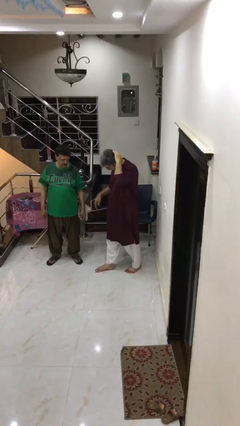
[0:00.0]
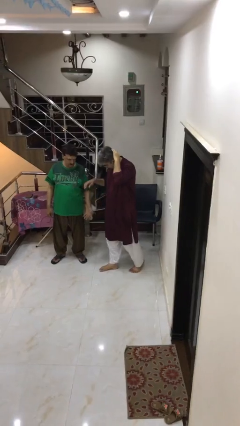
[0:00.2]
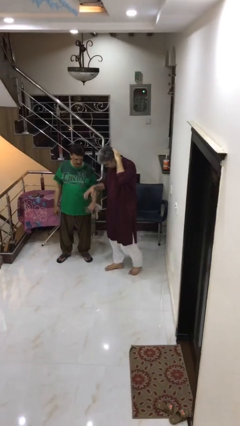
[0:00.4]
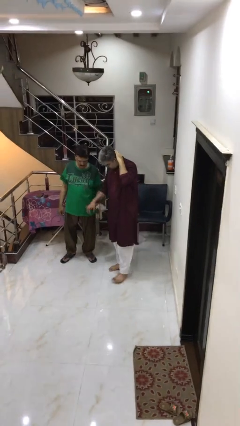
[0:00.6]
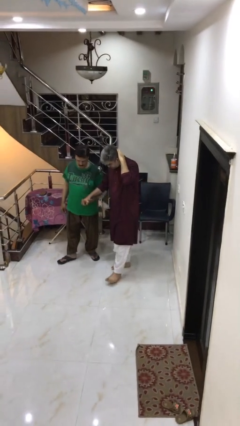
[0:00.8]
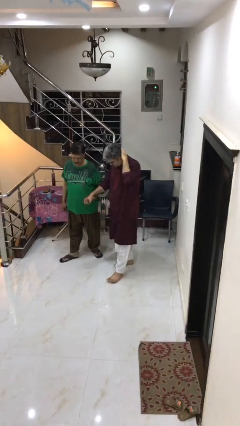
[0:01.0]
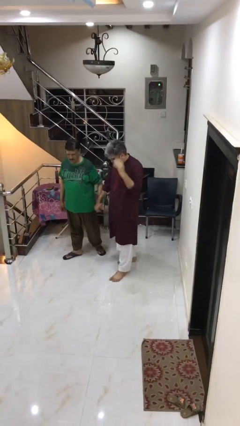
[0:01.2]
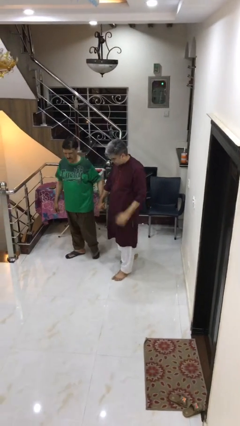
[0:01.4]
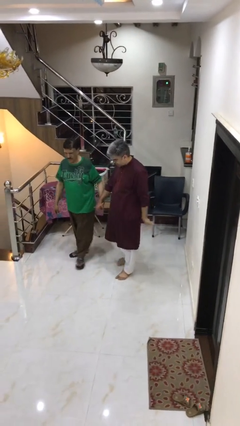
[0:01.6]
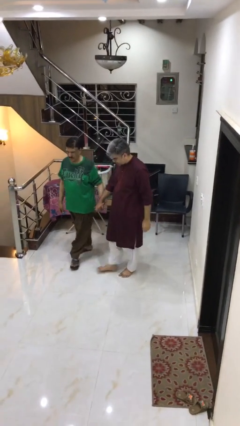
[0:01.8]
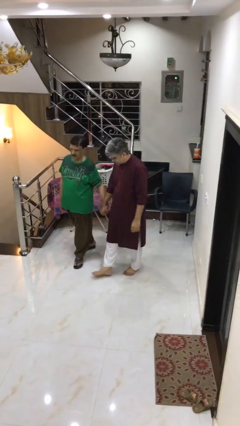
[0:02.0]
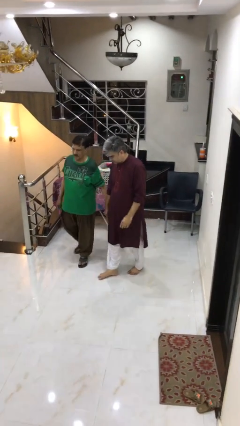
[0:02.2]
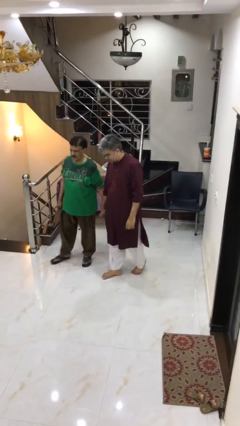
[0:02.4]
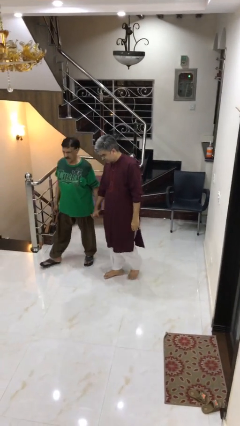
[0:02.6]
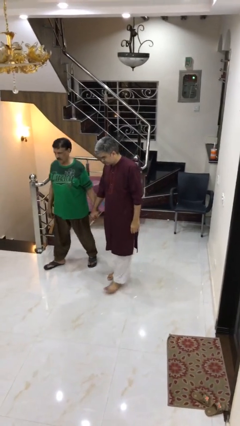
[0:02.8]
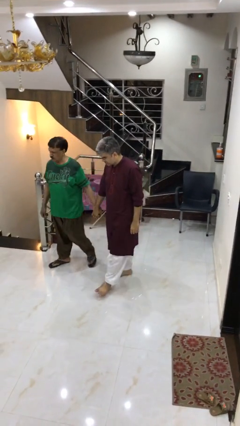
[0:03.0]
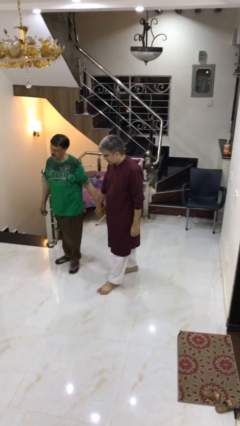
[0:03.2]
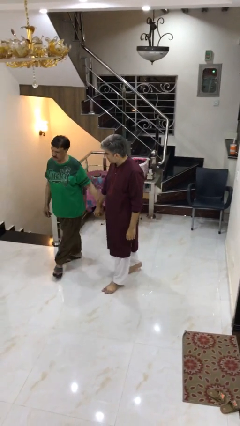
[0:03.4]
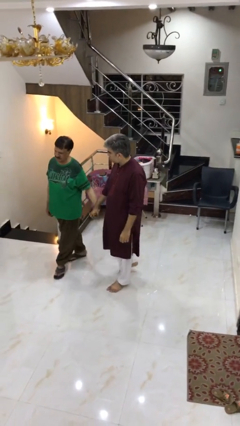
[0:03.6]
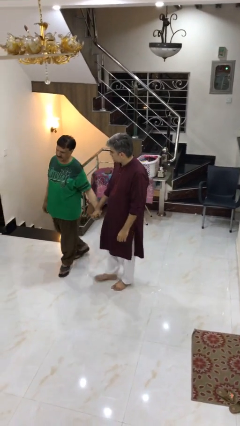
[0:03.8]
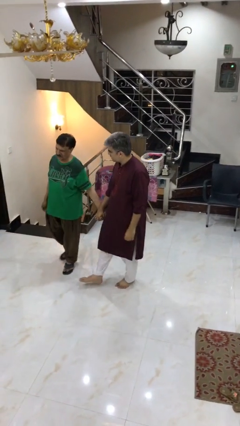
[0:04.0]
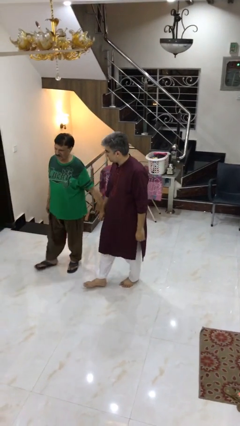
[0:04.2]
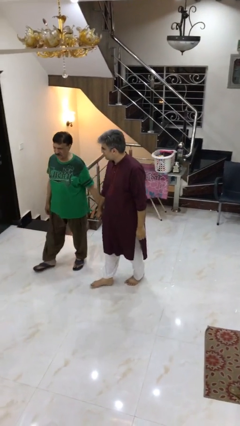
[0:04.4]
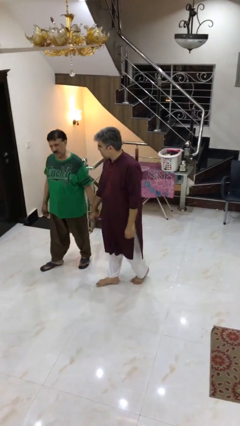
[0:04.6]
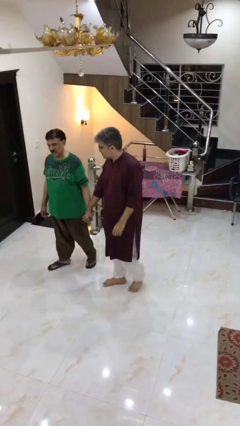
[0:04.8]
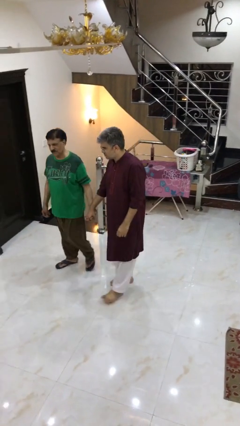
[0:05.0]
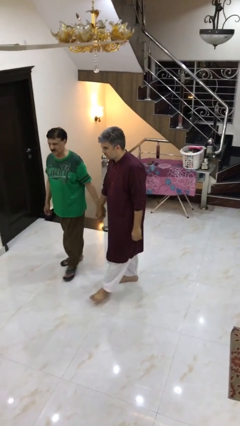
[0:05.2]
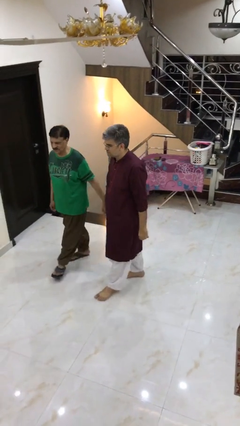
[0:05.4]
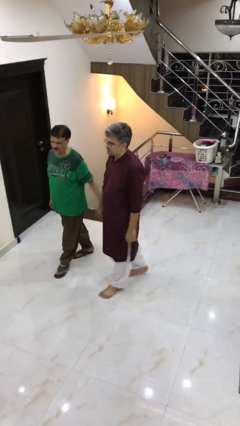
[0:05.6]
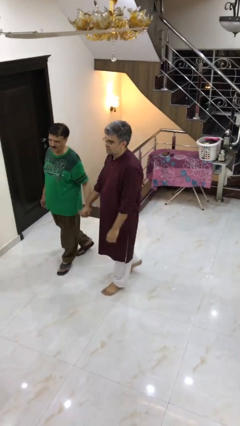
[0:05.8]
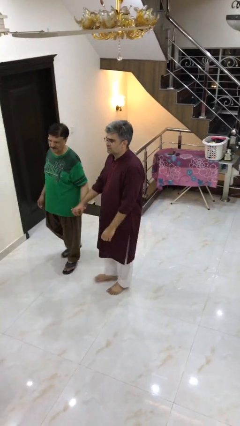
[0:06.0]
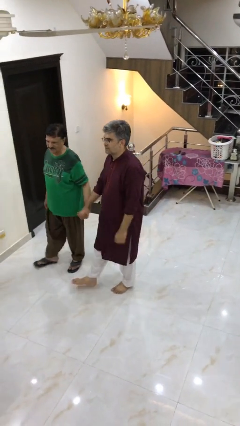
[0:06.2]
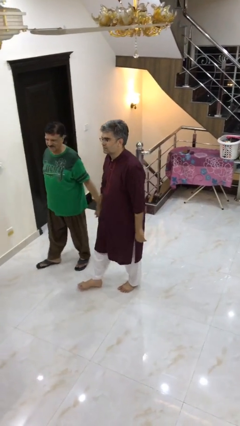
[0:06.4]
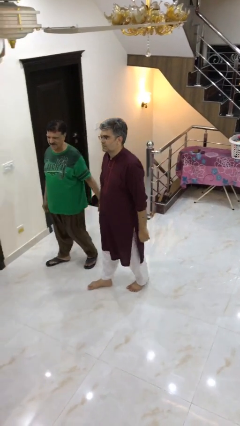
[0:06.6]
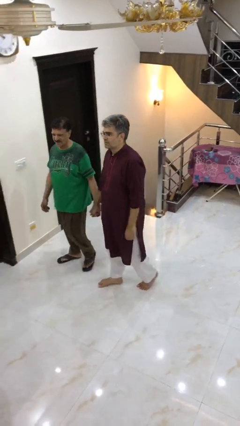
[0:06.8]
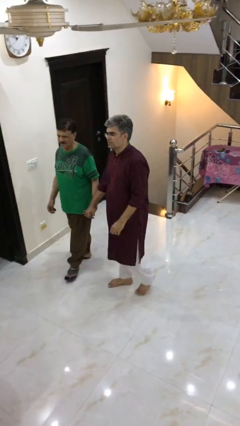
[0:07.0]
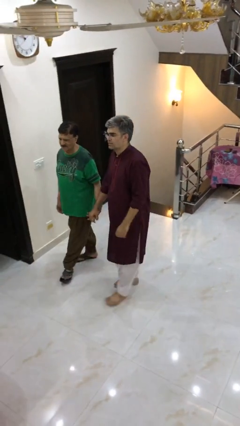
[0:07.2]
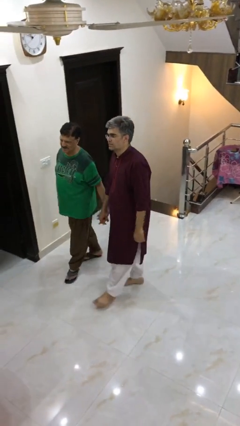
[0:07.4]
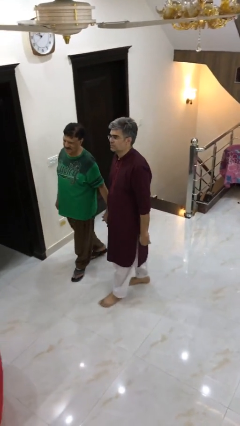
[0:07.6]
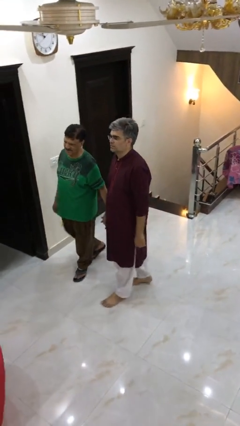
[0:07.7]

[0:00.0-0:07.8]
person holds hand

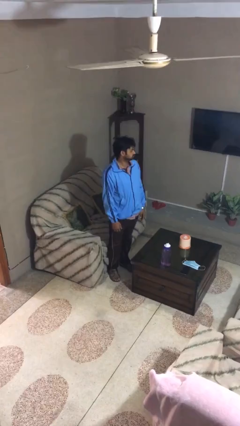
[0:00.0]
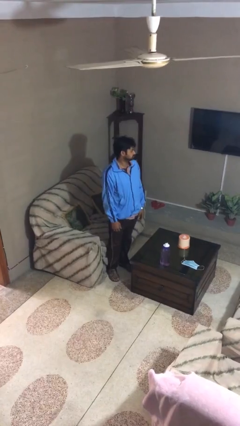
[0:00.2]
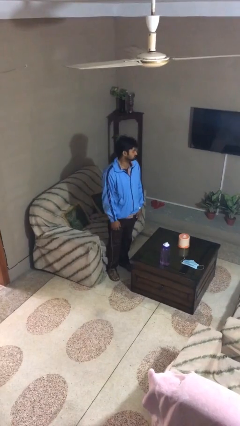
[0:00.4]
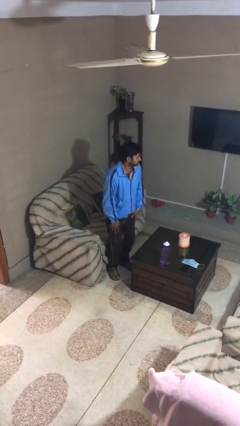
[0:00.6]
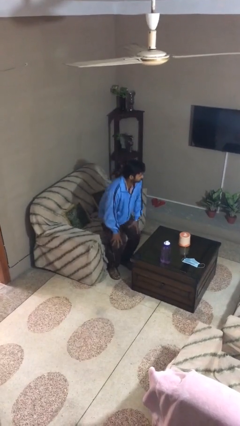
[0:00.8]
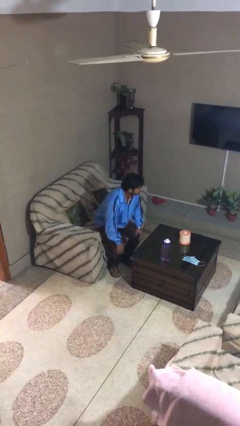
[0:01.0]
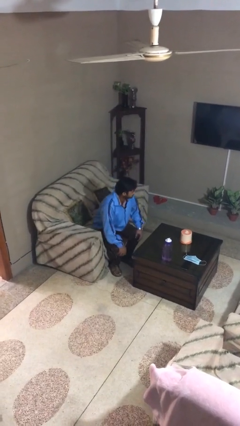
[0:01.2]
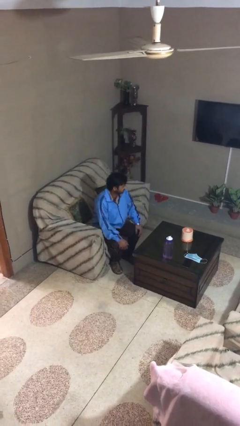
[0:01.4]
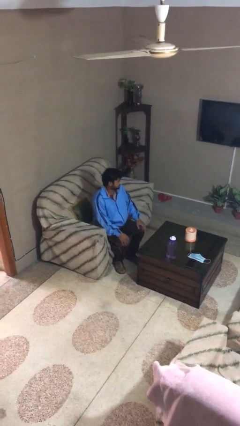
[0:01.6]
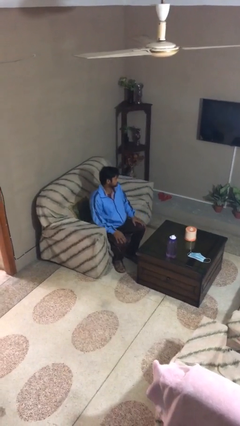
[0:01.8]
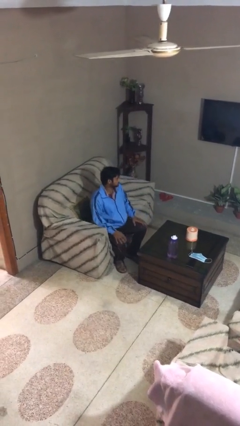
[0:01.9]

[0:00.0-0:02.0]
person sits down

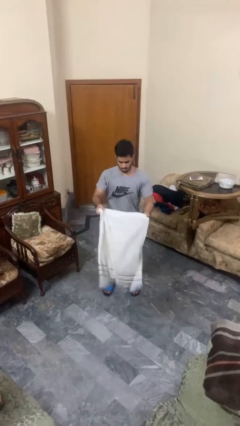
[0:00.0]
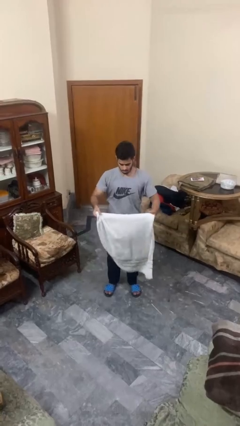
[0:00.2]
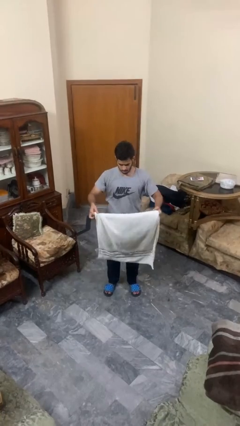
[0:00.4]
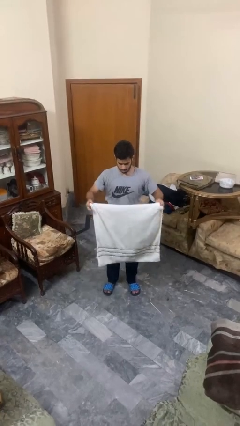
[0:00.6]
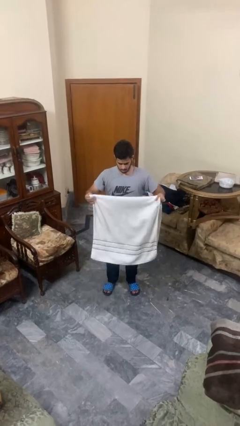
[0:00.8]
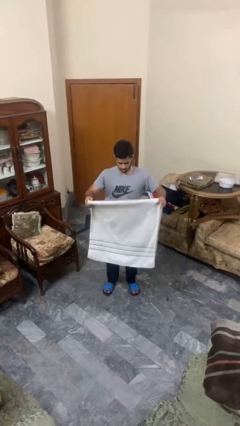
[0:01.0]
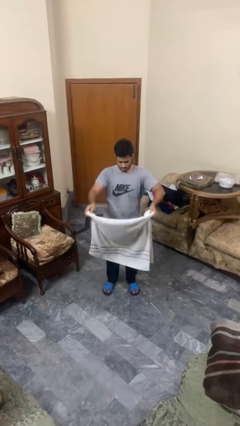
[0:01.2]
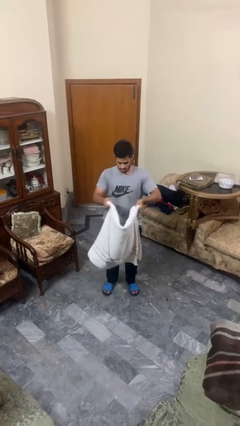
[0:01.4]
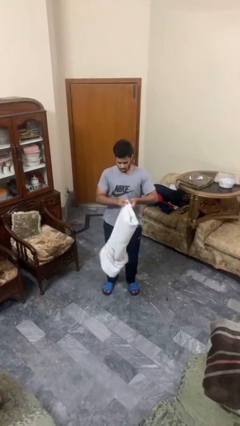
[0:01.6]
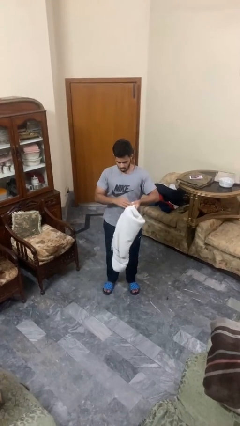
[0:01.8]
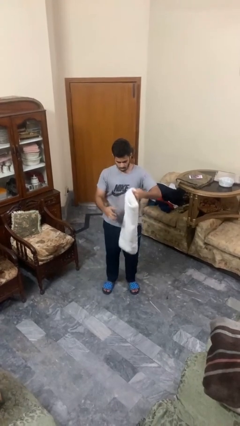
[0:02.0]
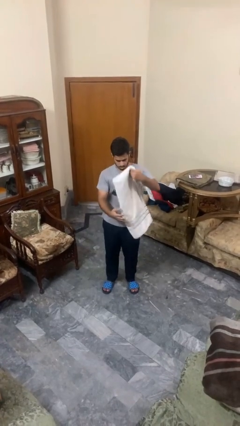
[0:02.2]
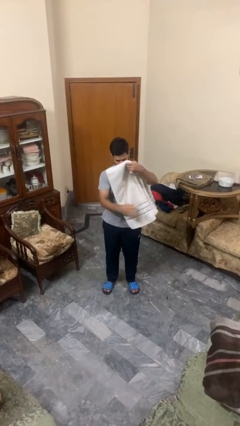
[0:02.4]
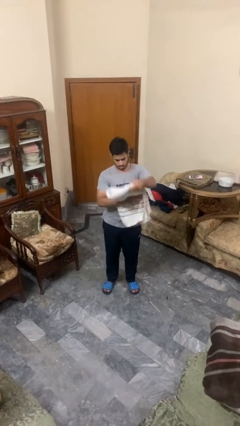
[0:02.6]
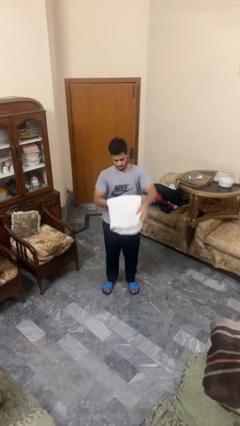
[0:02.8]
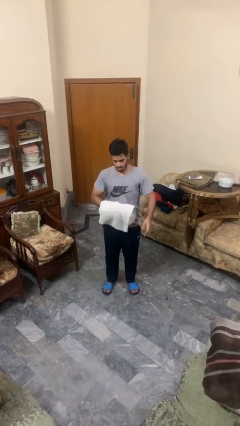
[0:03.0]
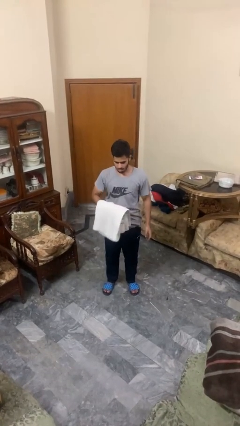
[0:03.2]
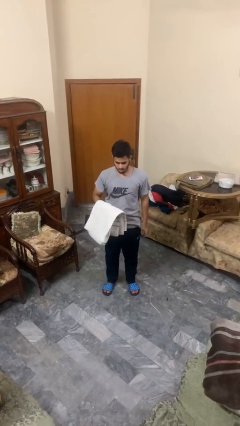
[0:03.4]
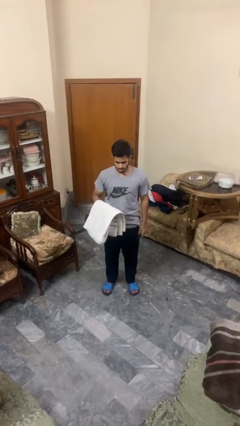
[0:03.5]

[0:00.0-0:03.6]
person folds towel

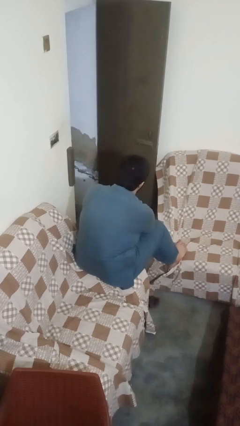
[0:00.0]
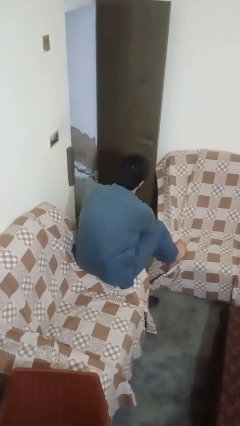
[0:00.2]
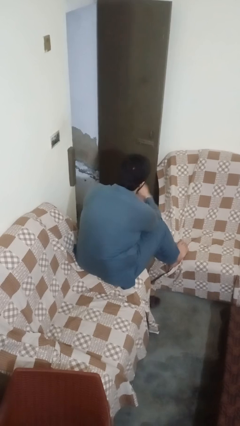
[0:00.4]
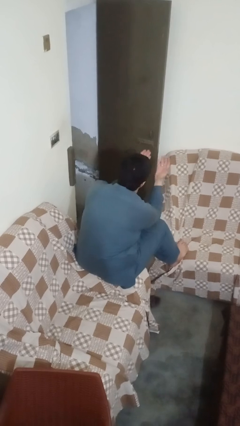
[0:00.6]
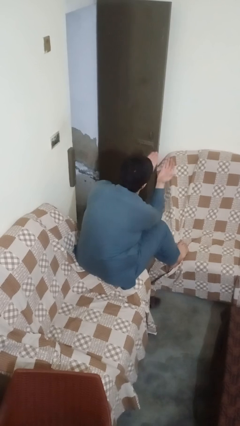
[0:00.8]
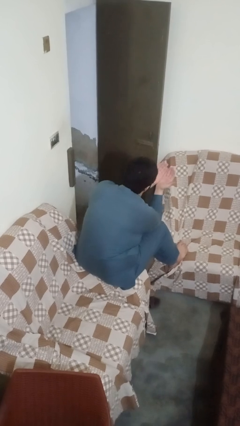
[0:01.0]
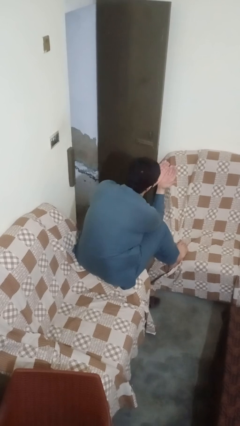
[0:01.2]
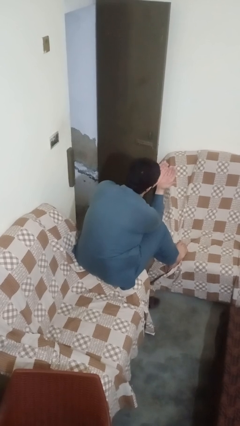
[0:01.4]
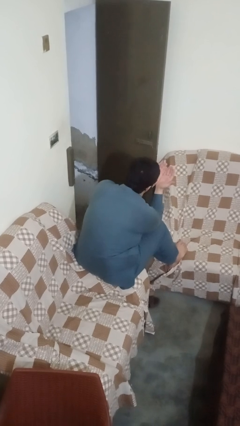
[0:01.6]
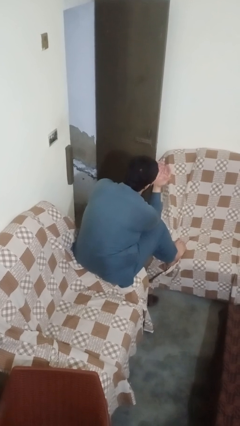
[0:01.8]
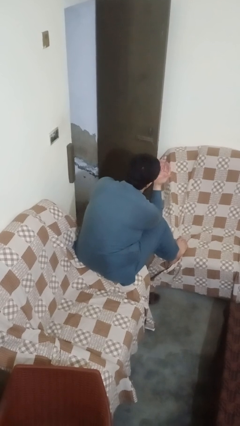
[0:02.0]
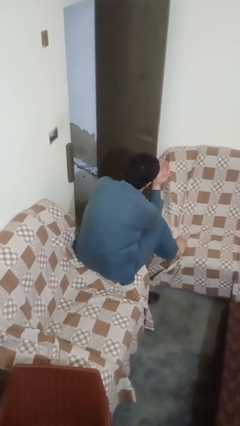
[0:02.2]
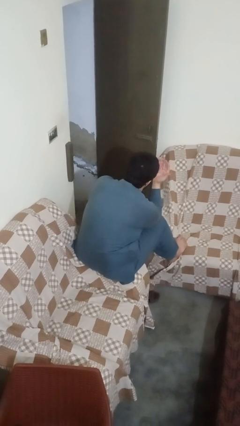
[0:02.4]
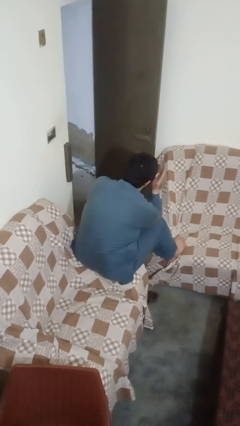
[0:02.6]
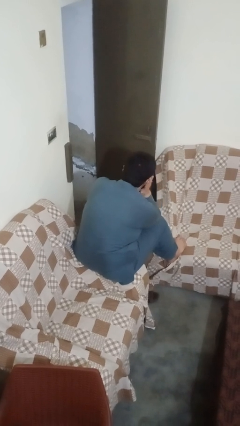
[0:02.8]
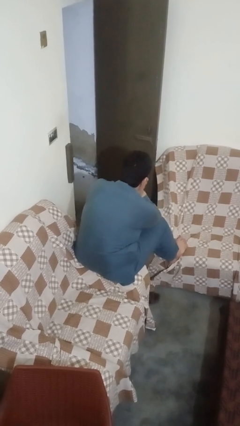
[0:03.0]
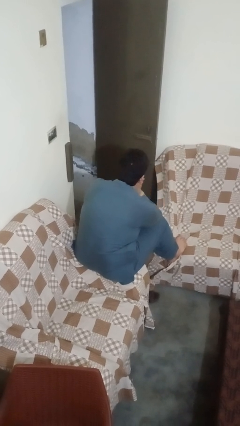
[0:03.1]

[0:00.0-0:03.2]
person prays

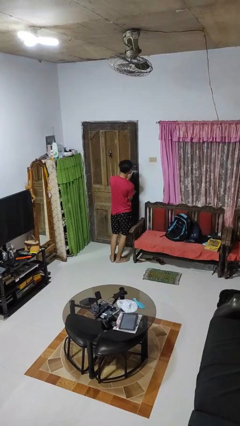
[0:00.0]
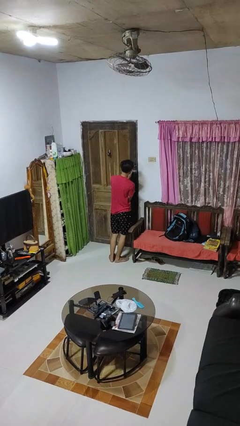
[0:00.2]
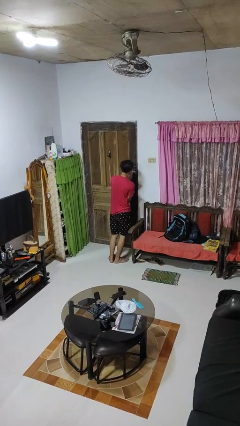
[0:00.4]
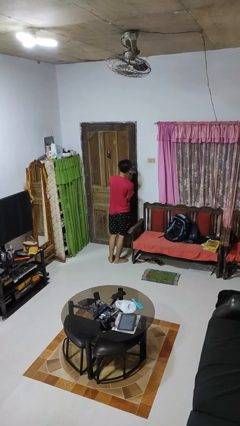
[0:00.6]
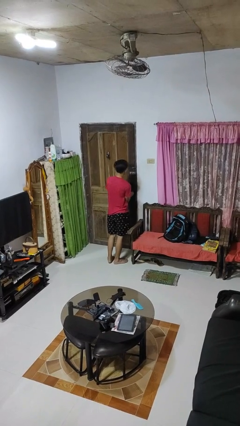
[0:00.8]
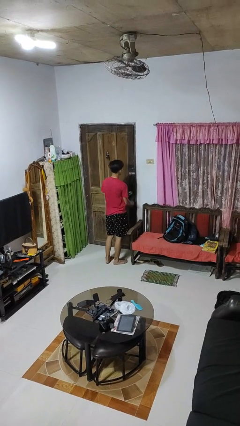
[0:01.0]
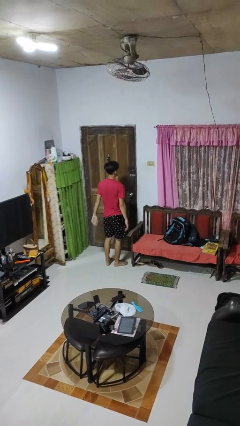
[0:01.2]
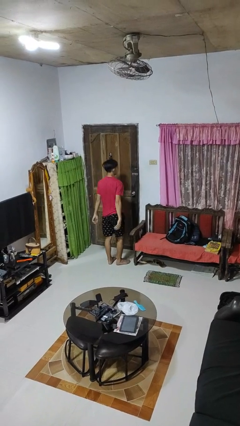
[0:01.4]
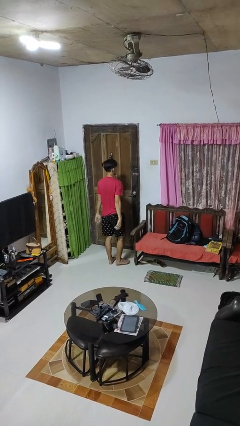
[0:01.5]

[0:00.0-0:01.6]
person locks door with keys
